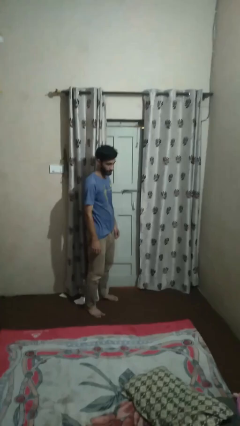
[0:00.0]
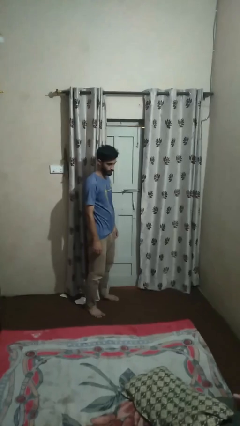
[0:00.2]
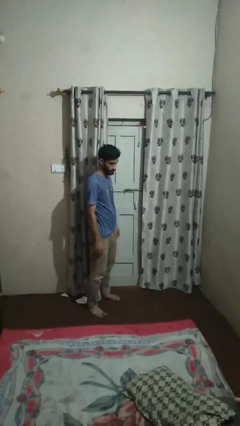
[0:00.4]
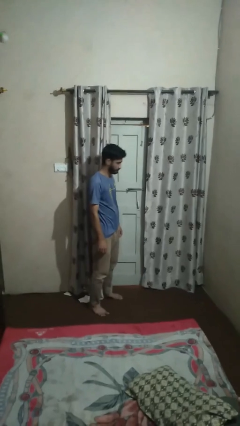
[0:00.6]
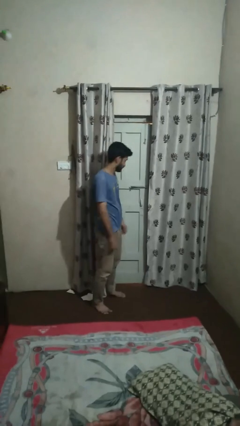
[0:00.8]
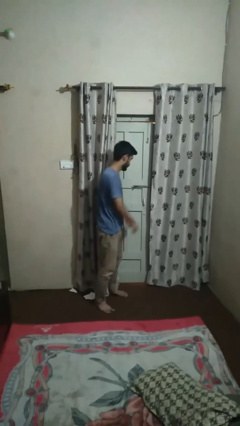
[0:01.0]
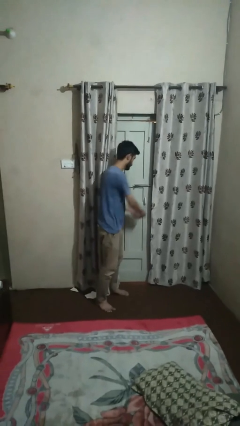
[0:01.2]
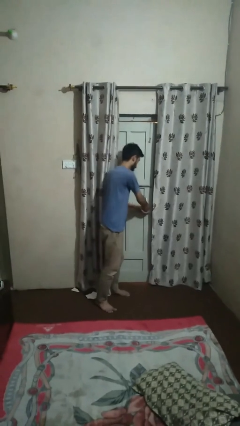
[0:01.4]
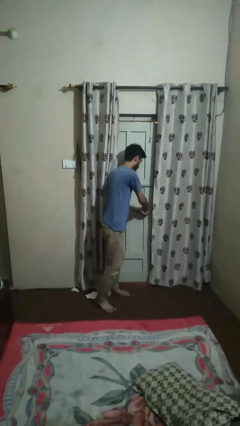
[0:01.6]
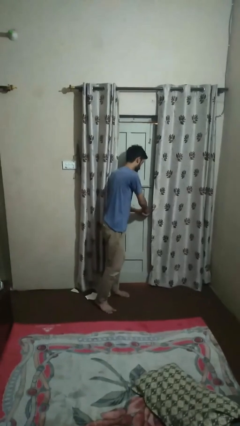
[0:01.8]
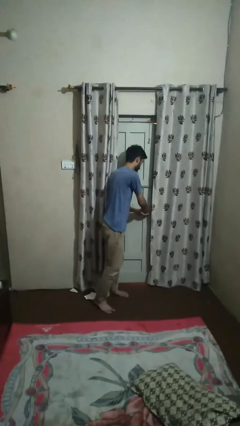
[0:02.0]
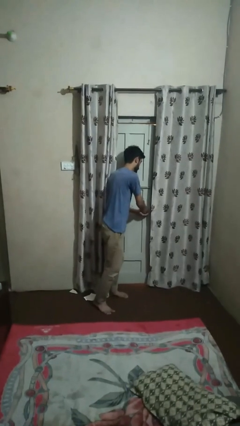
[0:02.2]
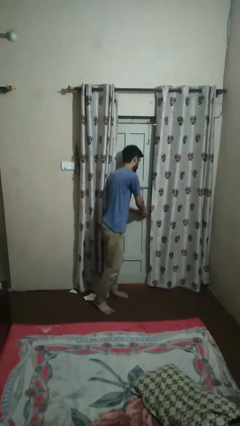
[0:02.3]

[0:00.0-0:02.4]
person unlocks door with keys

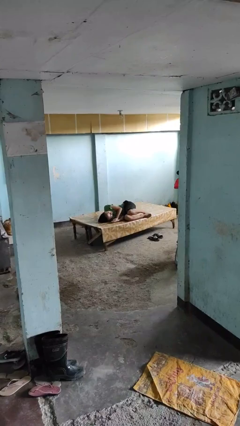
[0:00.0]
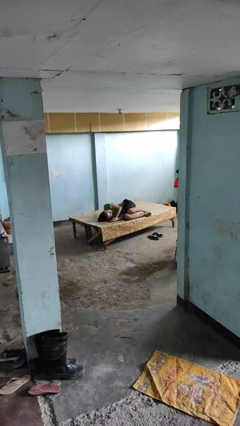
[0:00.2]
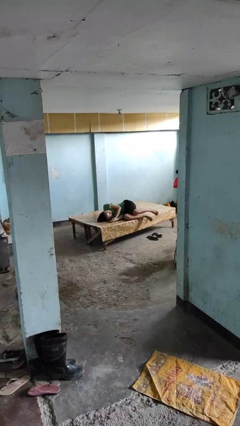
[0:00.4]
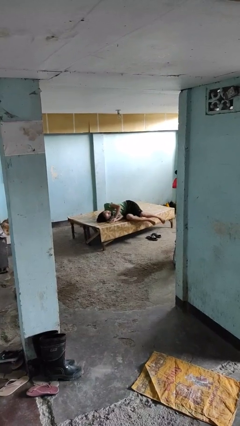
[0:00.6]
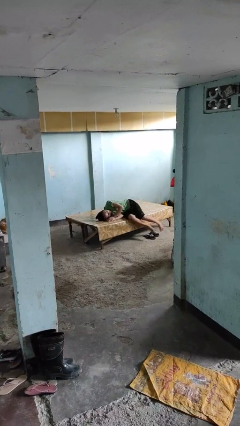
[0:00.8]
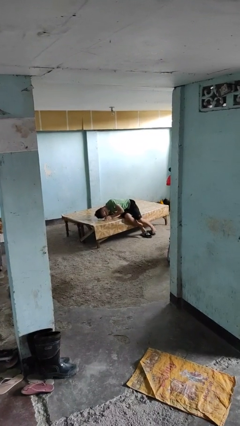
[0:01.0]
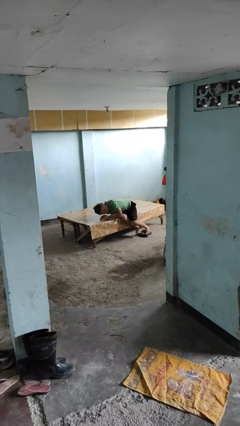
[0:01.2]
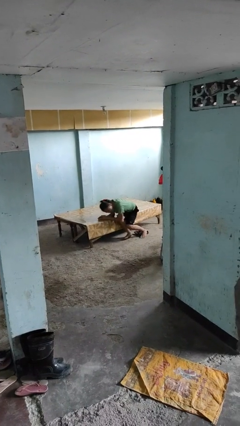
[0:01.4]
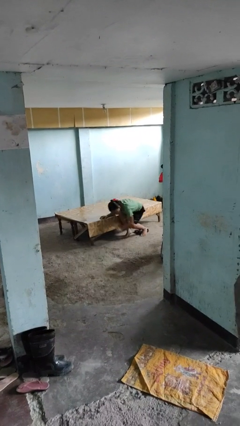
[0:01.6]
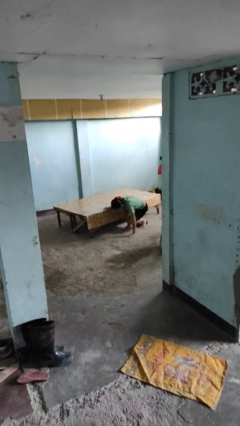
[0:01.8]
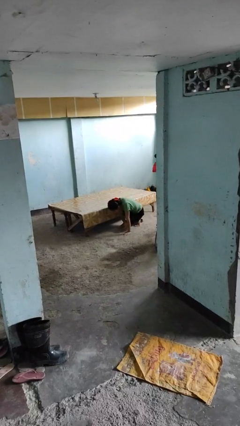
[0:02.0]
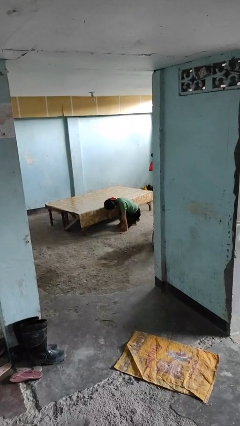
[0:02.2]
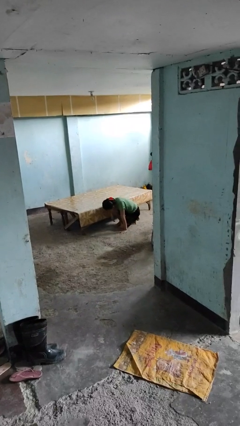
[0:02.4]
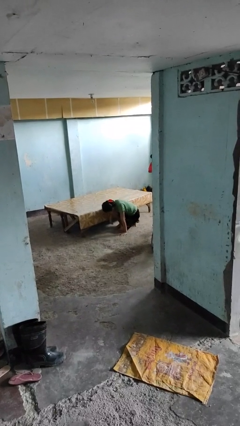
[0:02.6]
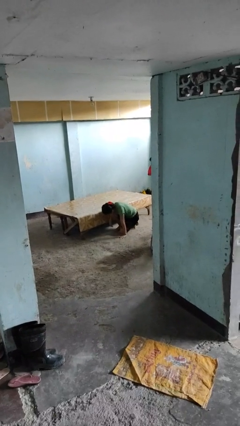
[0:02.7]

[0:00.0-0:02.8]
person falls from bed

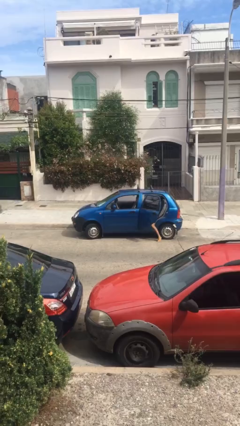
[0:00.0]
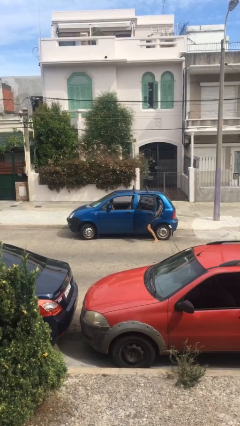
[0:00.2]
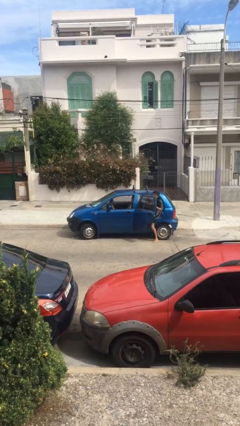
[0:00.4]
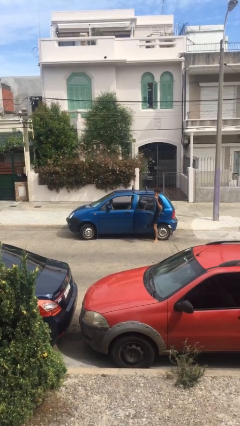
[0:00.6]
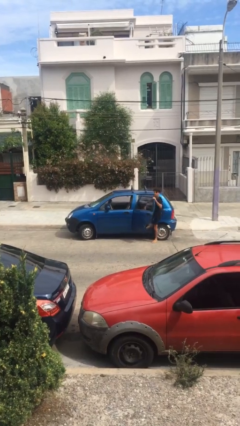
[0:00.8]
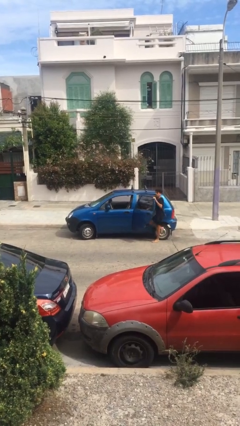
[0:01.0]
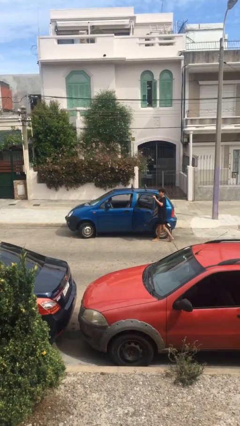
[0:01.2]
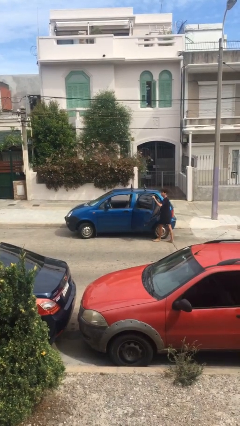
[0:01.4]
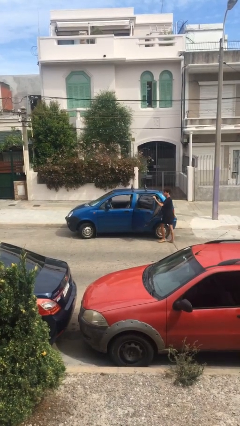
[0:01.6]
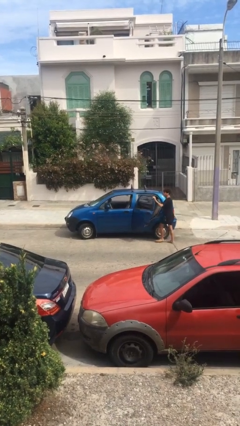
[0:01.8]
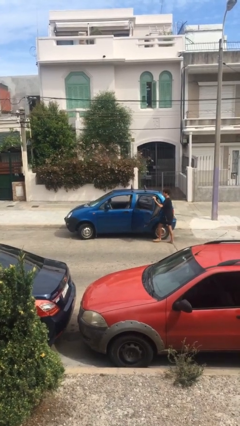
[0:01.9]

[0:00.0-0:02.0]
person exits car

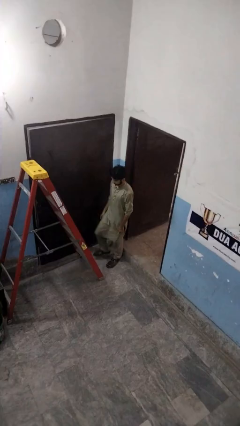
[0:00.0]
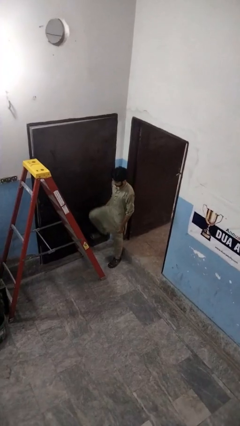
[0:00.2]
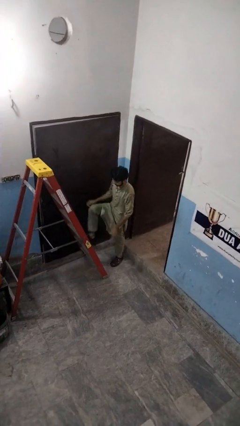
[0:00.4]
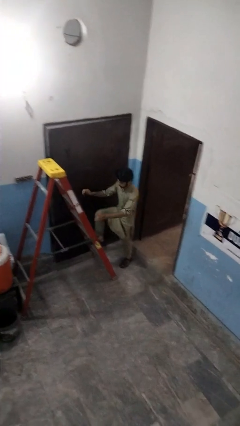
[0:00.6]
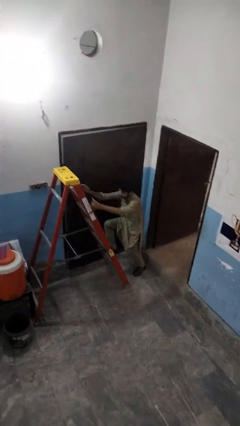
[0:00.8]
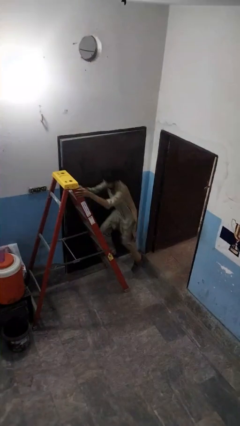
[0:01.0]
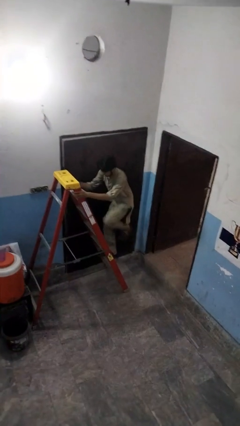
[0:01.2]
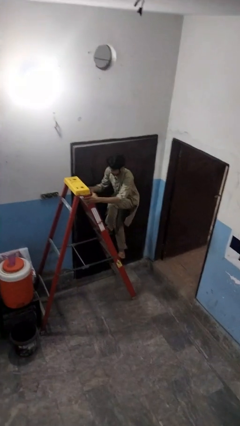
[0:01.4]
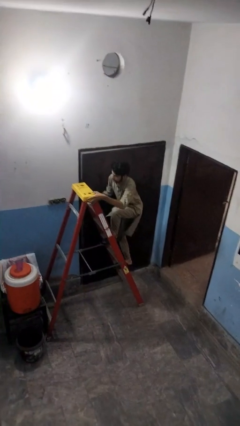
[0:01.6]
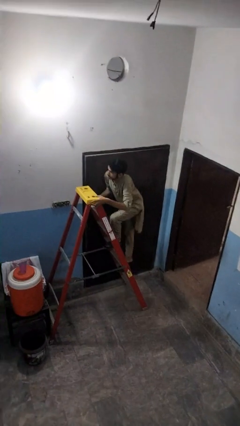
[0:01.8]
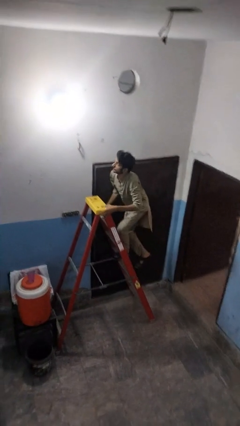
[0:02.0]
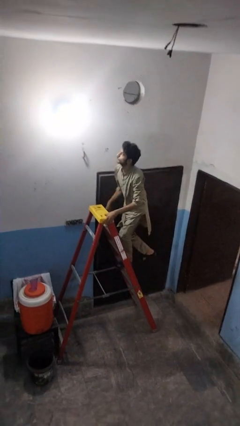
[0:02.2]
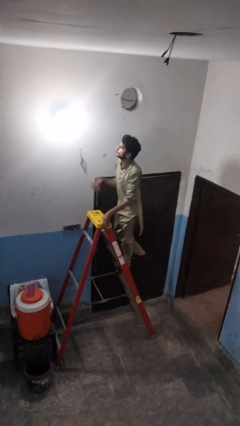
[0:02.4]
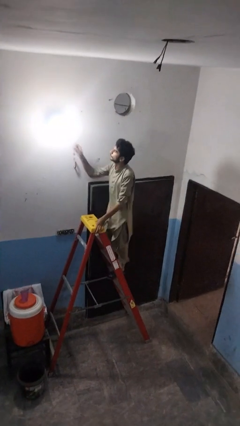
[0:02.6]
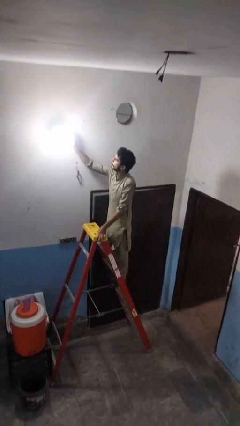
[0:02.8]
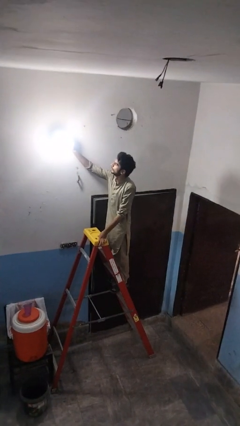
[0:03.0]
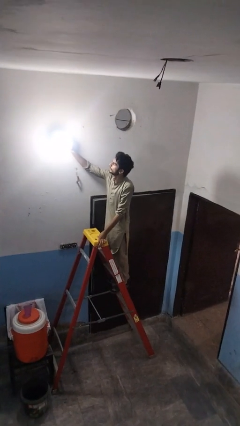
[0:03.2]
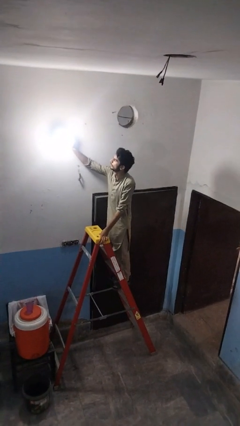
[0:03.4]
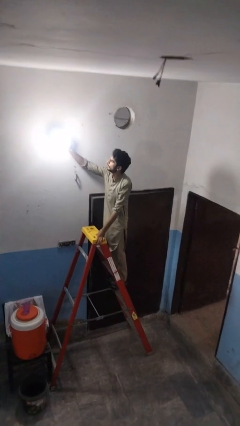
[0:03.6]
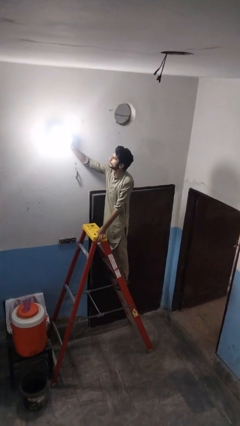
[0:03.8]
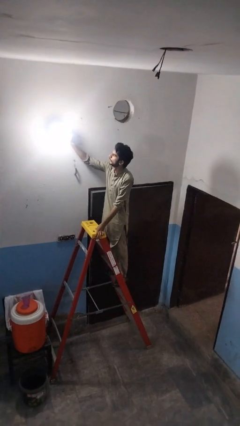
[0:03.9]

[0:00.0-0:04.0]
person climbs up ladder

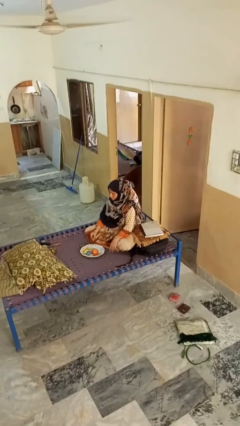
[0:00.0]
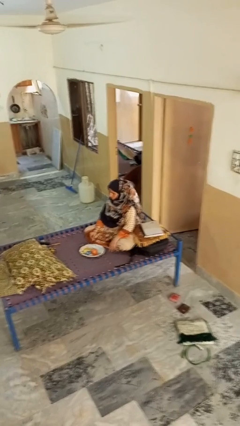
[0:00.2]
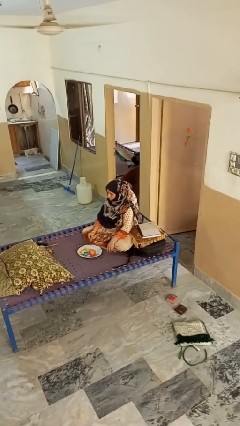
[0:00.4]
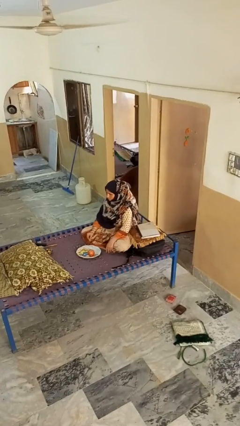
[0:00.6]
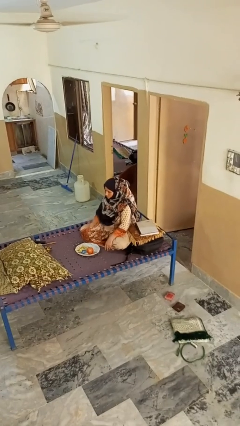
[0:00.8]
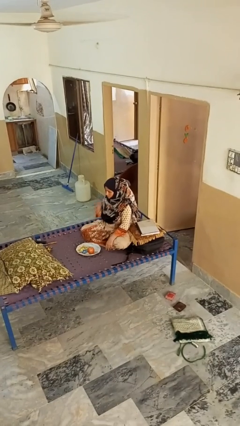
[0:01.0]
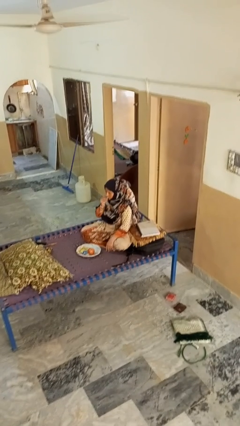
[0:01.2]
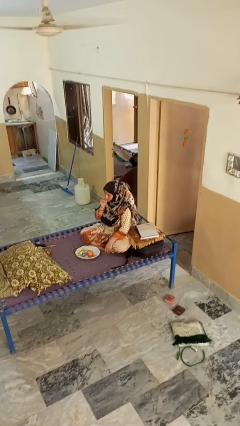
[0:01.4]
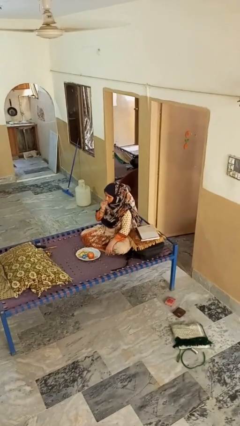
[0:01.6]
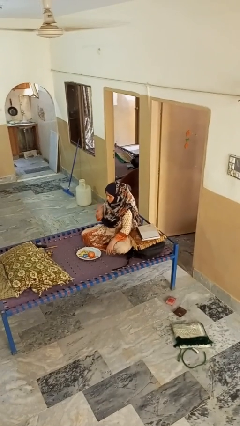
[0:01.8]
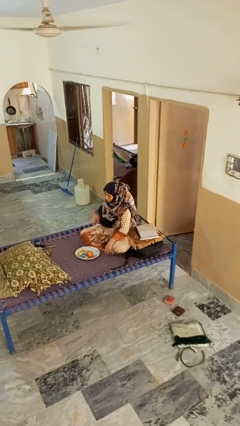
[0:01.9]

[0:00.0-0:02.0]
person eats apple

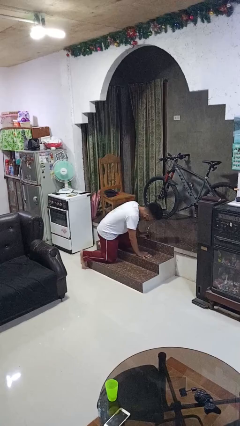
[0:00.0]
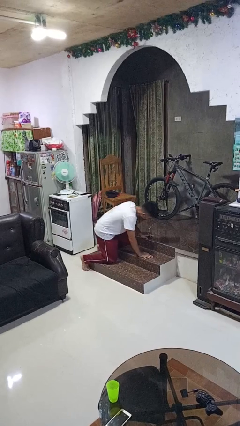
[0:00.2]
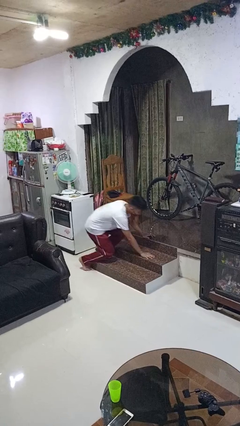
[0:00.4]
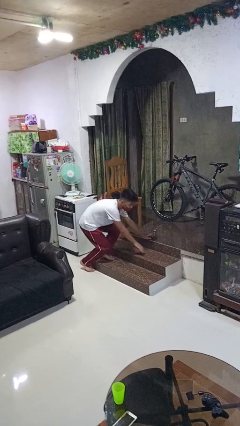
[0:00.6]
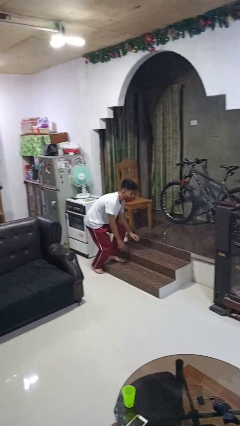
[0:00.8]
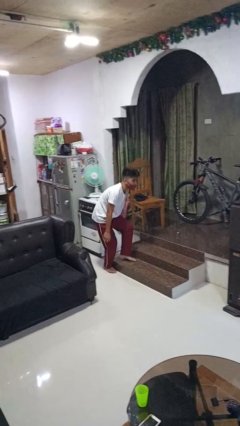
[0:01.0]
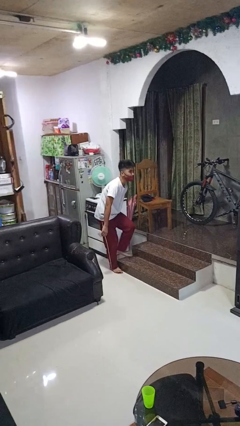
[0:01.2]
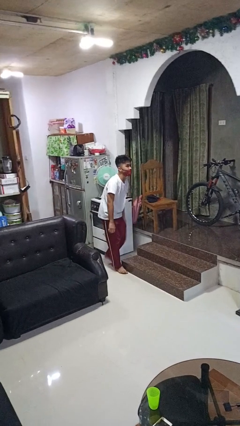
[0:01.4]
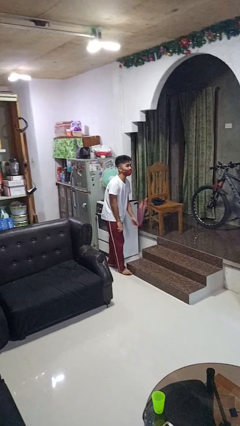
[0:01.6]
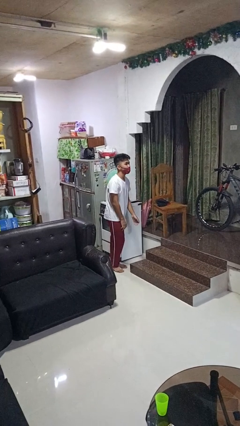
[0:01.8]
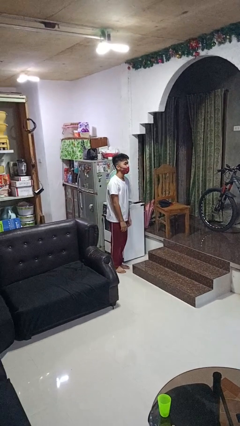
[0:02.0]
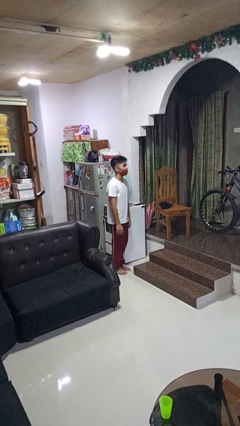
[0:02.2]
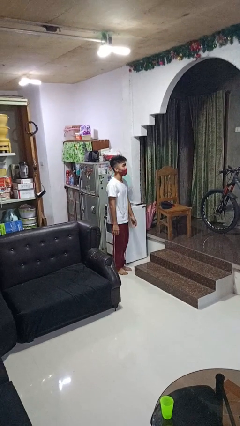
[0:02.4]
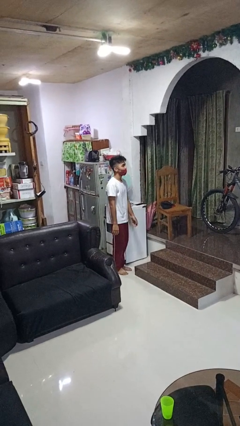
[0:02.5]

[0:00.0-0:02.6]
person stands up from floor

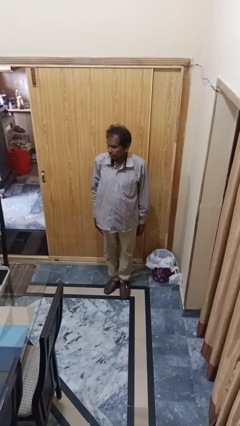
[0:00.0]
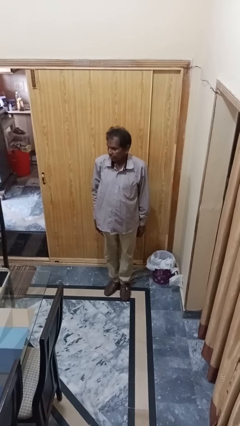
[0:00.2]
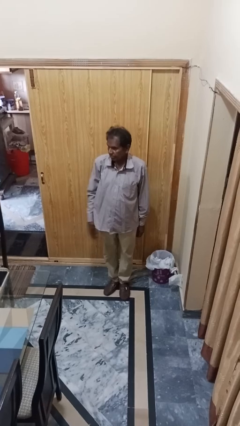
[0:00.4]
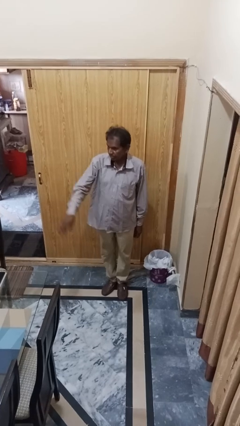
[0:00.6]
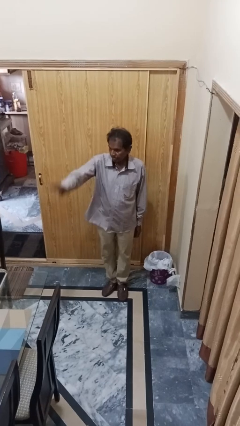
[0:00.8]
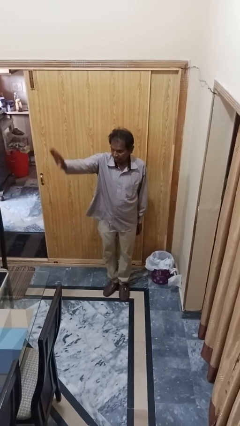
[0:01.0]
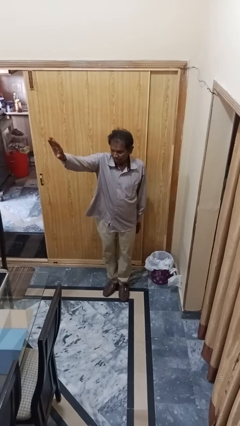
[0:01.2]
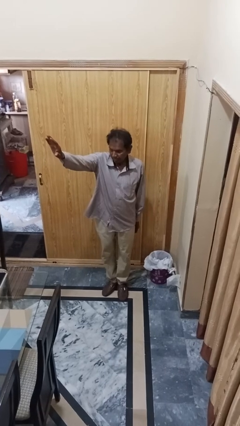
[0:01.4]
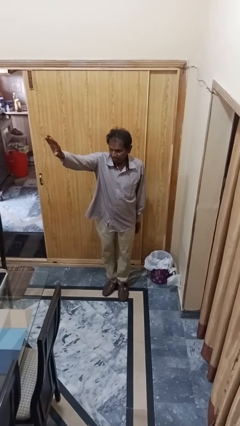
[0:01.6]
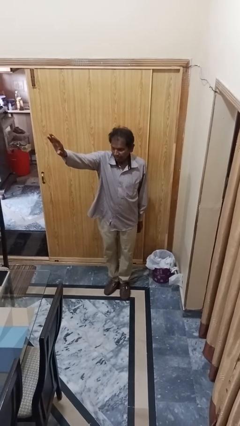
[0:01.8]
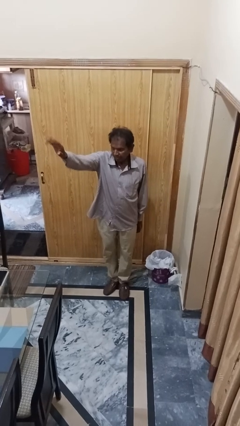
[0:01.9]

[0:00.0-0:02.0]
person gestures raise hand
